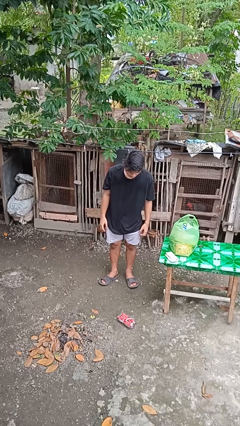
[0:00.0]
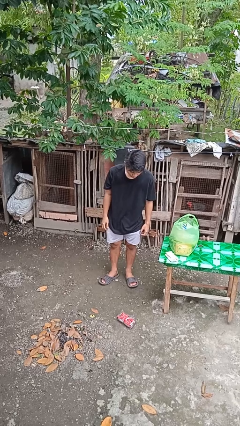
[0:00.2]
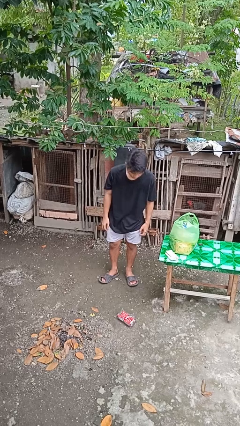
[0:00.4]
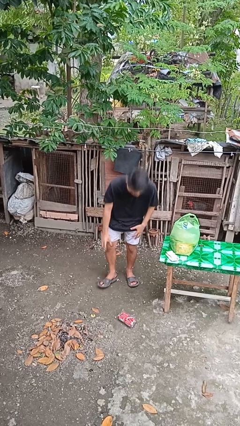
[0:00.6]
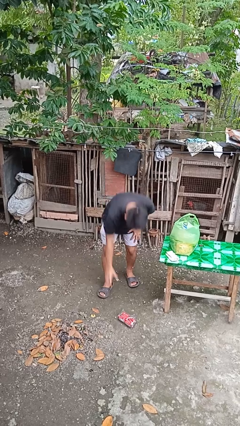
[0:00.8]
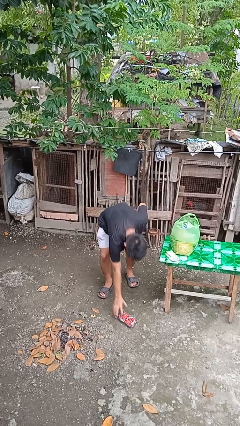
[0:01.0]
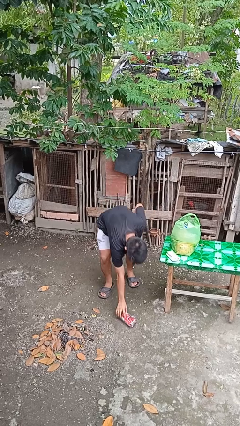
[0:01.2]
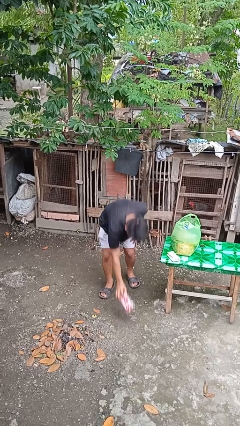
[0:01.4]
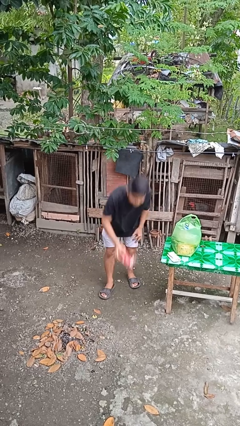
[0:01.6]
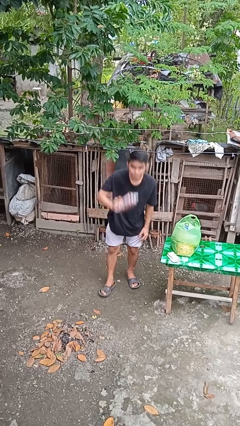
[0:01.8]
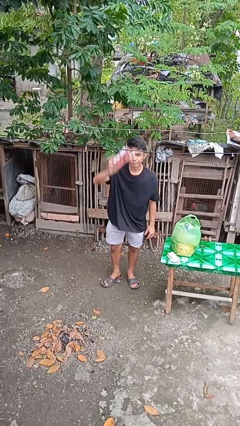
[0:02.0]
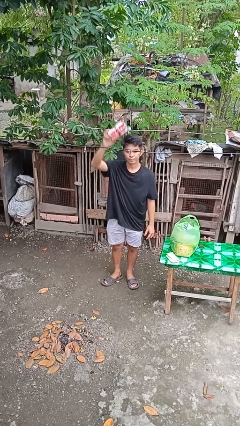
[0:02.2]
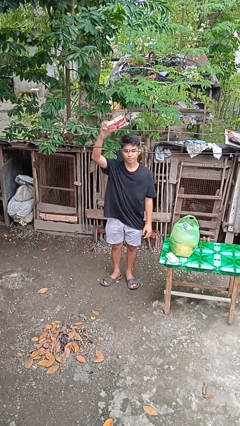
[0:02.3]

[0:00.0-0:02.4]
person picks up object from floor

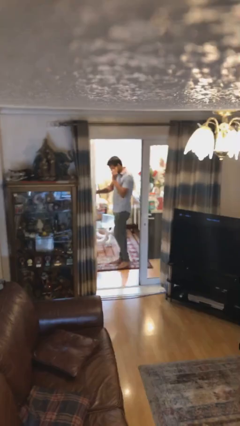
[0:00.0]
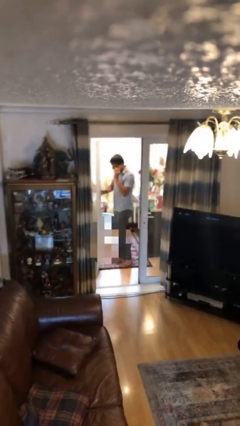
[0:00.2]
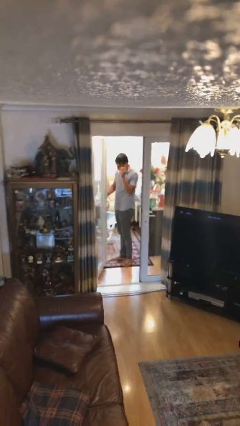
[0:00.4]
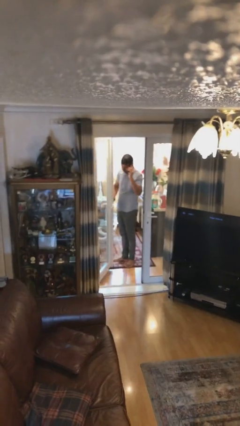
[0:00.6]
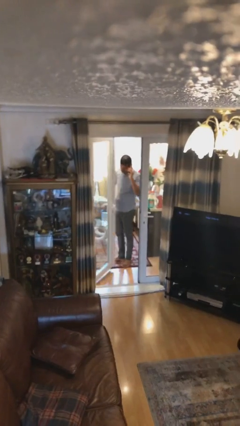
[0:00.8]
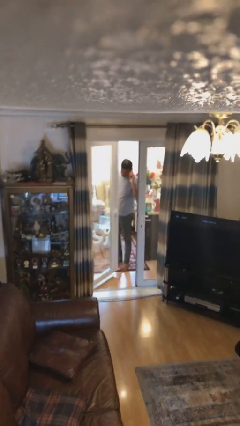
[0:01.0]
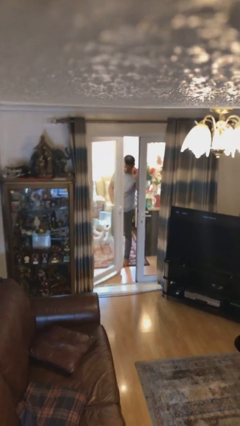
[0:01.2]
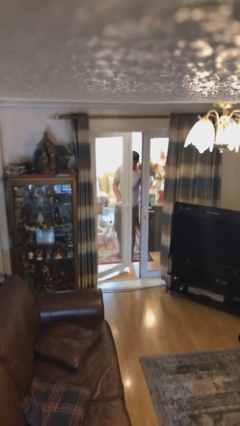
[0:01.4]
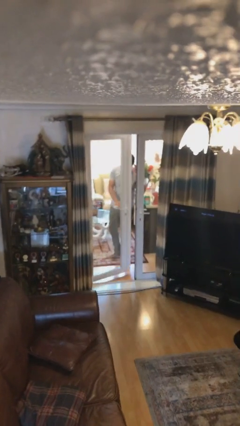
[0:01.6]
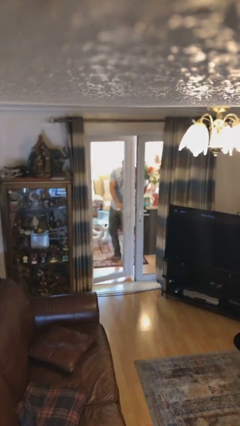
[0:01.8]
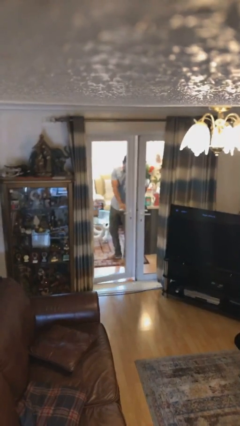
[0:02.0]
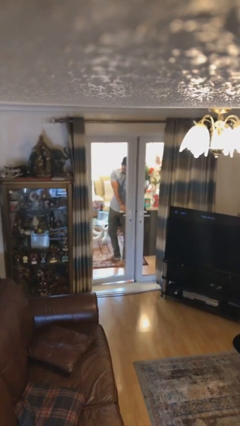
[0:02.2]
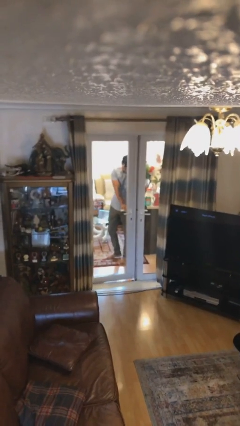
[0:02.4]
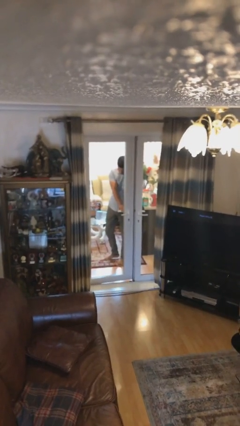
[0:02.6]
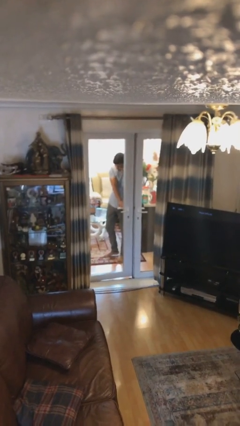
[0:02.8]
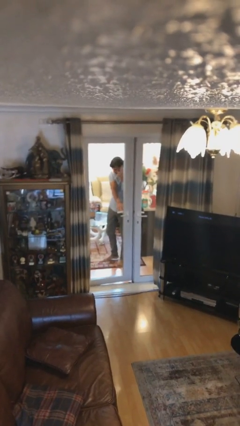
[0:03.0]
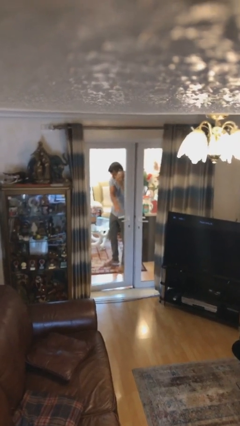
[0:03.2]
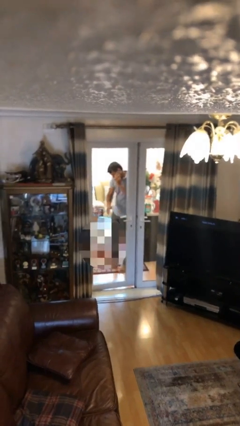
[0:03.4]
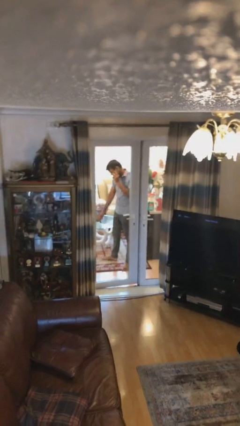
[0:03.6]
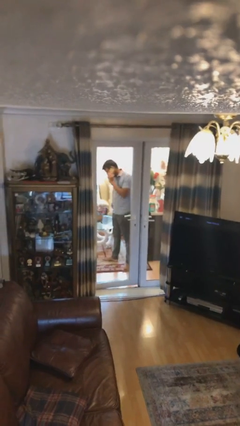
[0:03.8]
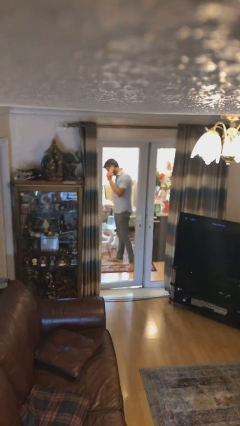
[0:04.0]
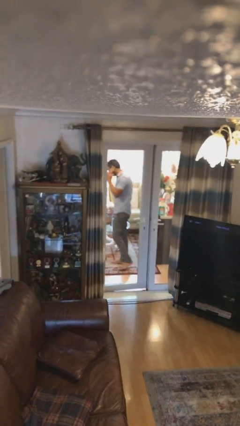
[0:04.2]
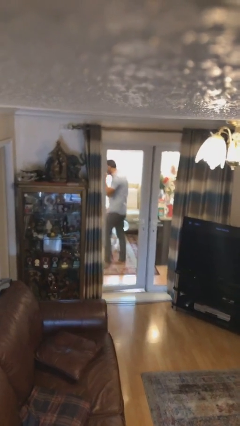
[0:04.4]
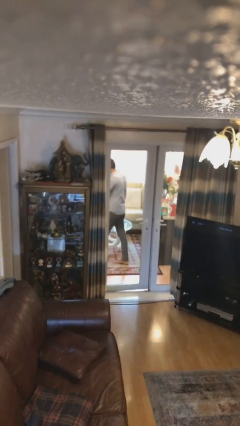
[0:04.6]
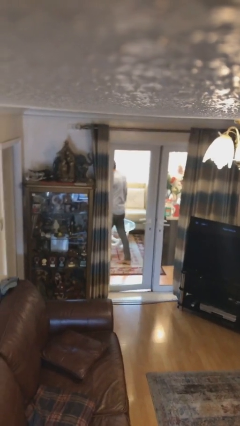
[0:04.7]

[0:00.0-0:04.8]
person closes facility door

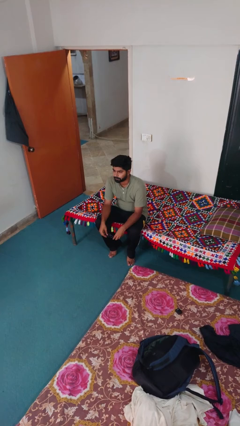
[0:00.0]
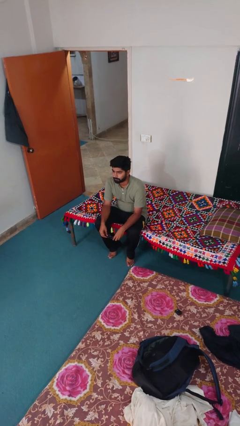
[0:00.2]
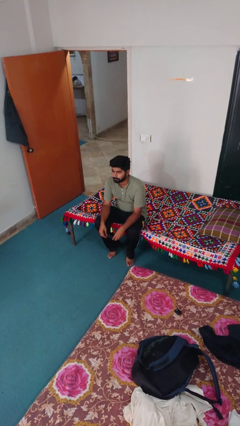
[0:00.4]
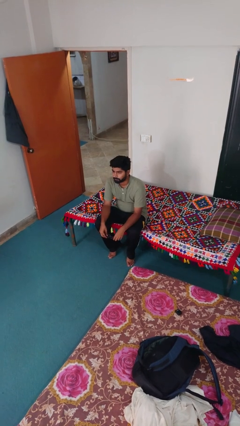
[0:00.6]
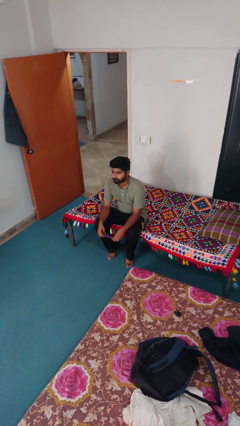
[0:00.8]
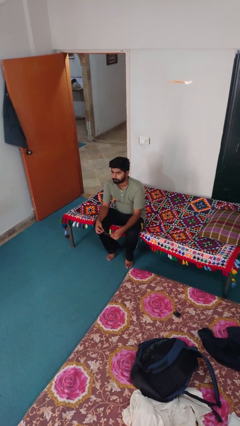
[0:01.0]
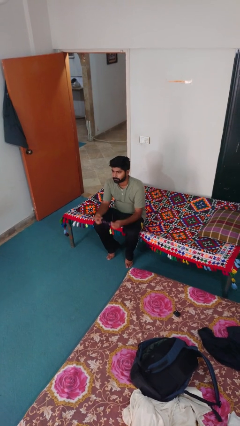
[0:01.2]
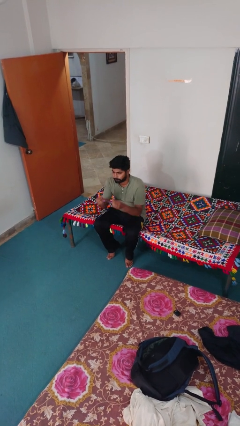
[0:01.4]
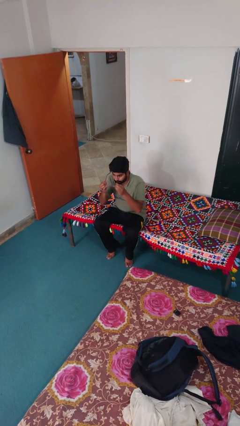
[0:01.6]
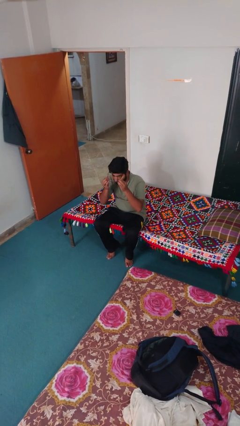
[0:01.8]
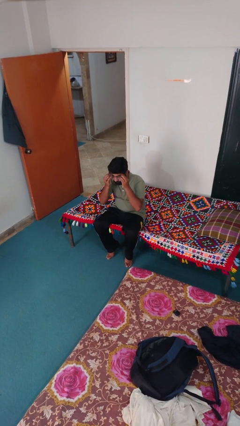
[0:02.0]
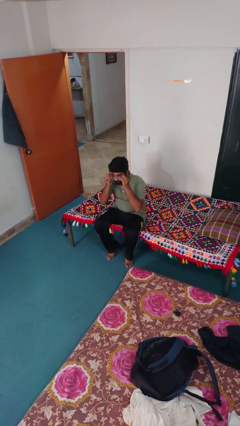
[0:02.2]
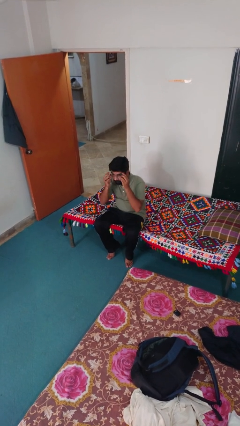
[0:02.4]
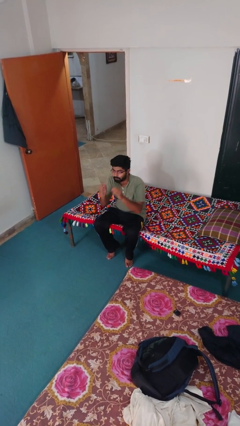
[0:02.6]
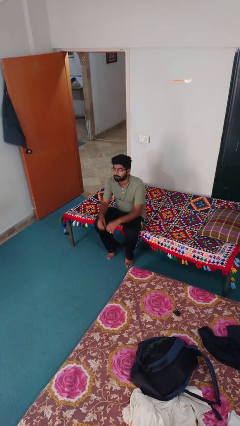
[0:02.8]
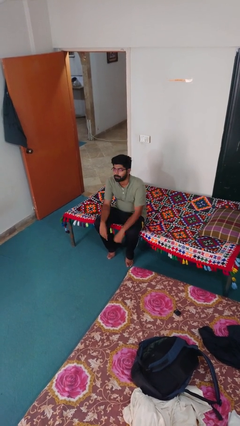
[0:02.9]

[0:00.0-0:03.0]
person puts on glasses

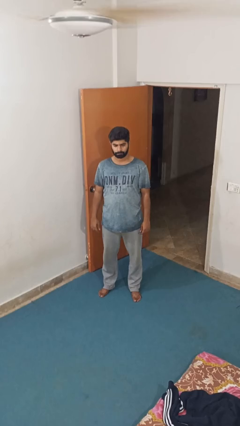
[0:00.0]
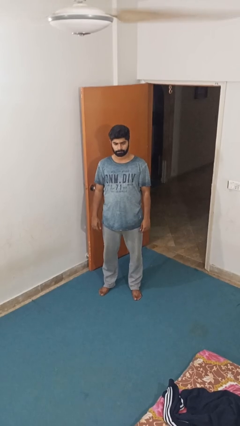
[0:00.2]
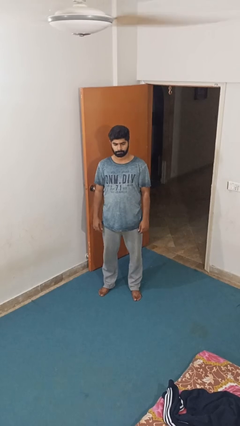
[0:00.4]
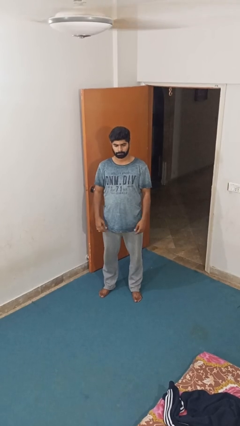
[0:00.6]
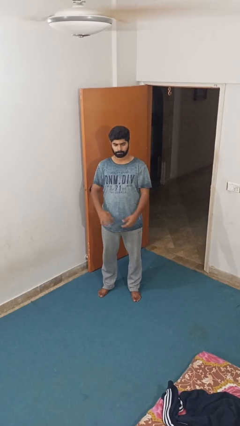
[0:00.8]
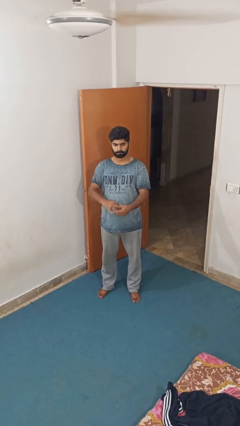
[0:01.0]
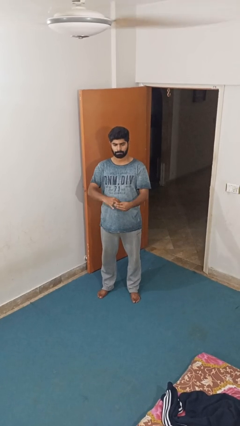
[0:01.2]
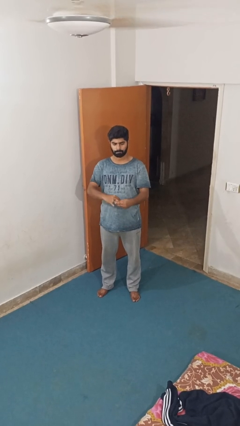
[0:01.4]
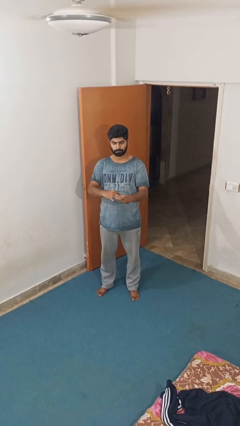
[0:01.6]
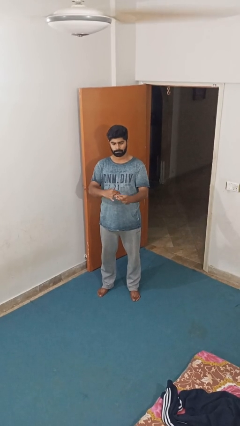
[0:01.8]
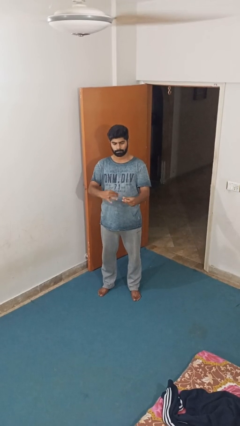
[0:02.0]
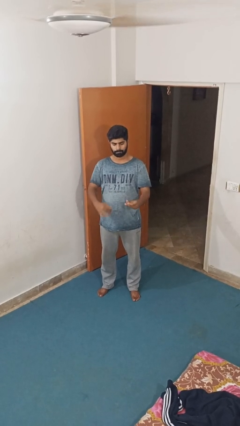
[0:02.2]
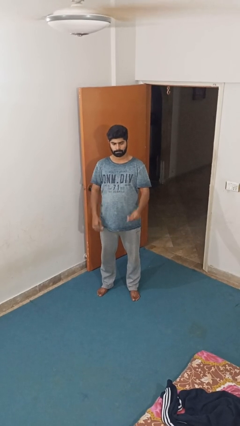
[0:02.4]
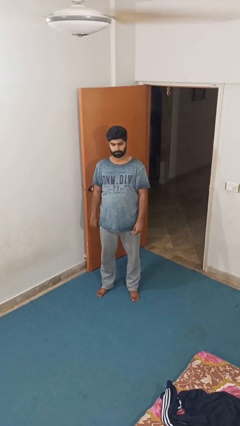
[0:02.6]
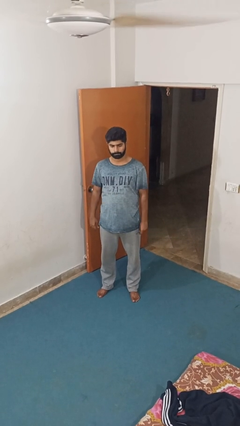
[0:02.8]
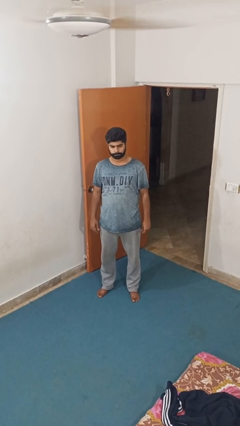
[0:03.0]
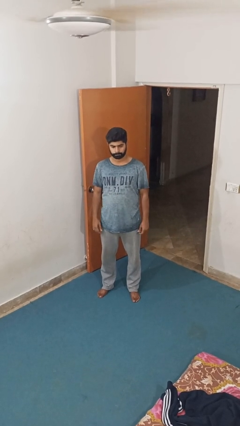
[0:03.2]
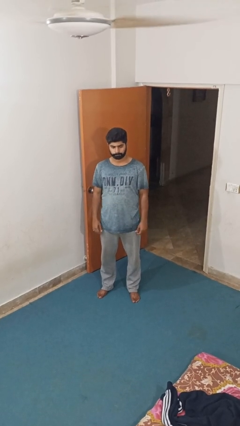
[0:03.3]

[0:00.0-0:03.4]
person takes off ring

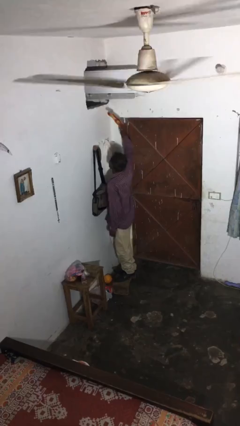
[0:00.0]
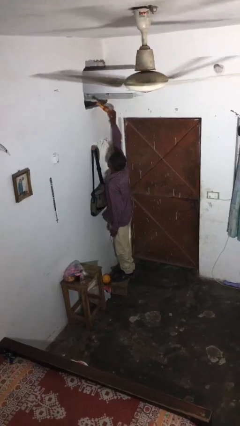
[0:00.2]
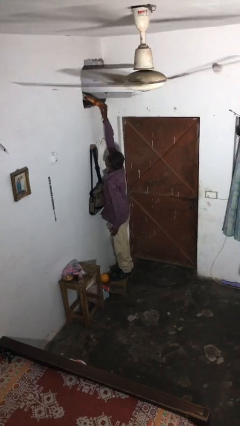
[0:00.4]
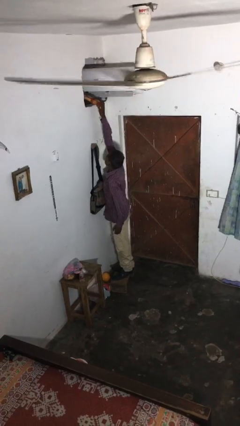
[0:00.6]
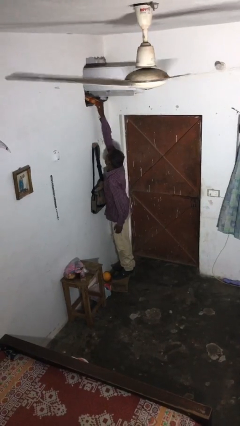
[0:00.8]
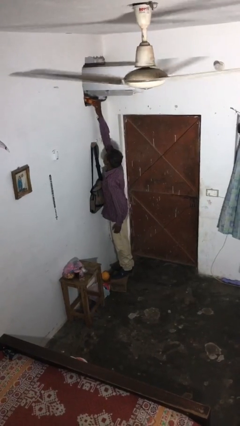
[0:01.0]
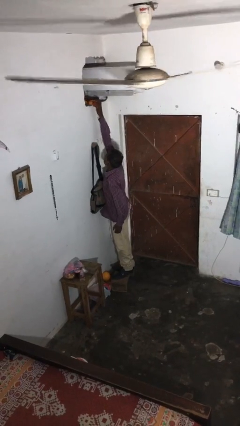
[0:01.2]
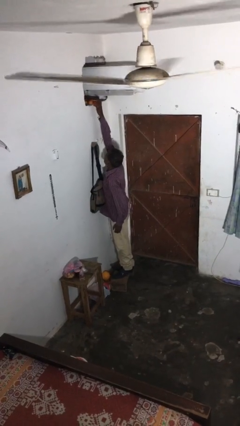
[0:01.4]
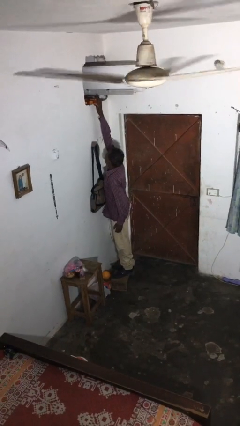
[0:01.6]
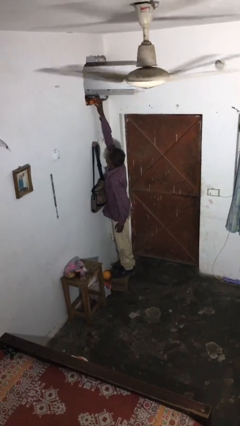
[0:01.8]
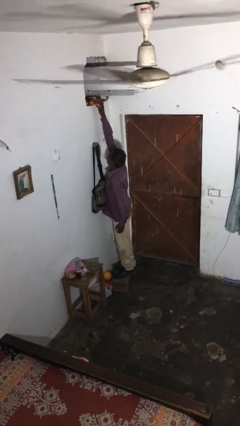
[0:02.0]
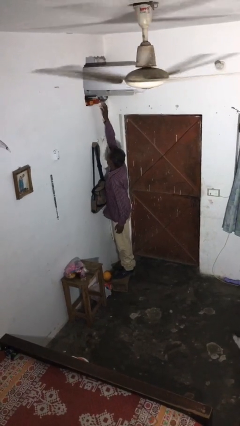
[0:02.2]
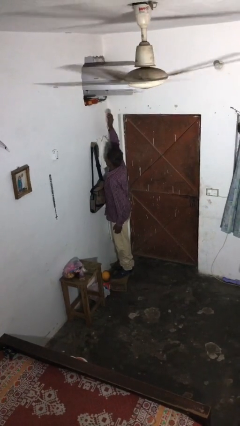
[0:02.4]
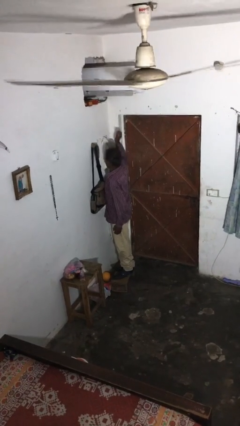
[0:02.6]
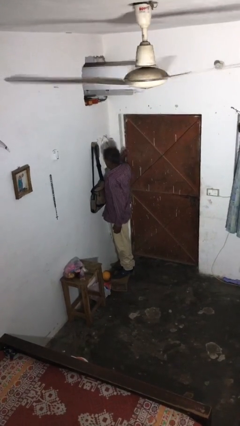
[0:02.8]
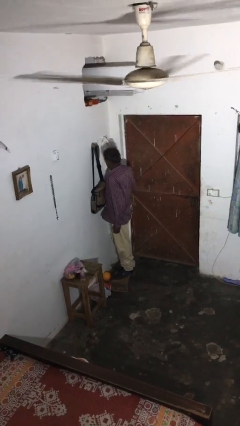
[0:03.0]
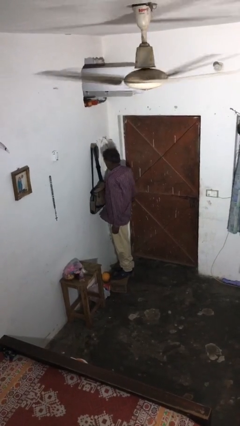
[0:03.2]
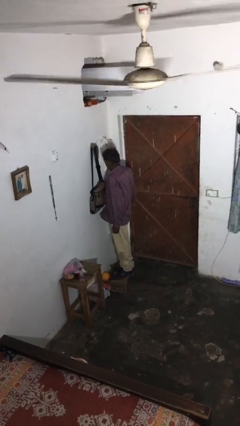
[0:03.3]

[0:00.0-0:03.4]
person puts down object on shelf

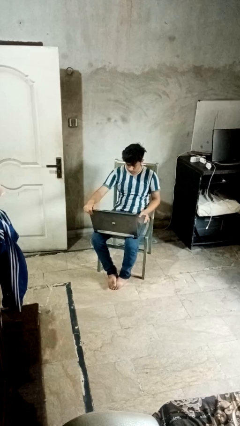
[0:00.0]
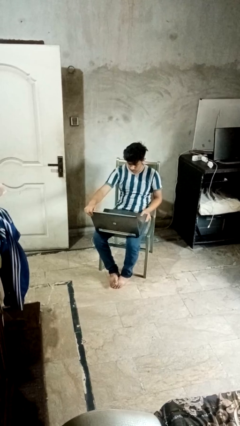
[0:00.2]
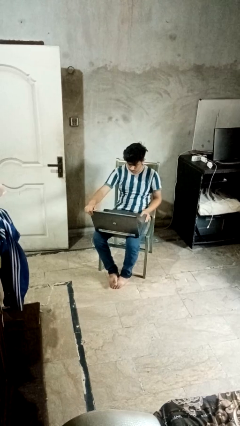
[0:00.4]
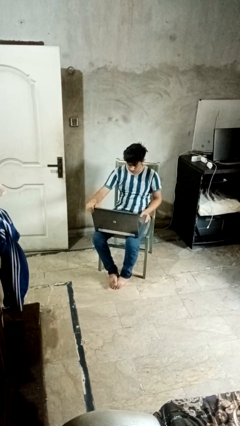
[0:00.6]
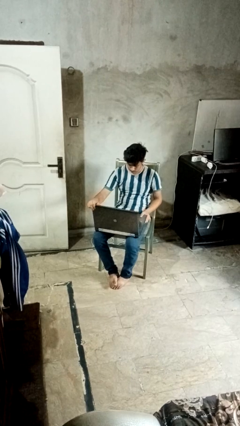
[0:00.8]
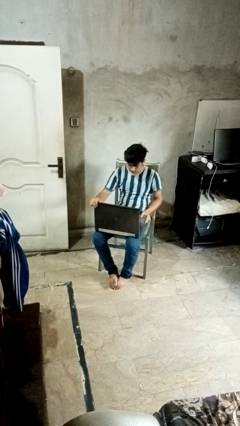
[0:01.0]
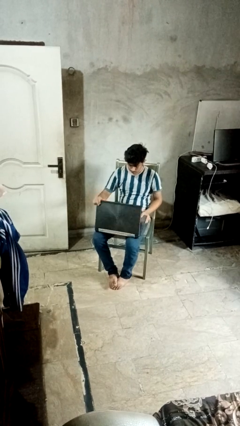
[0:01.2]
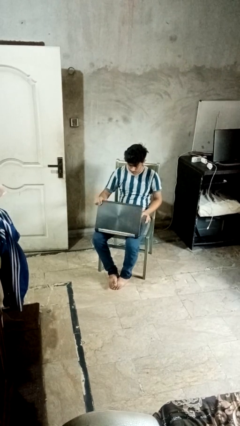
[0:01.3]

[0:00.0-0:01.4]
person closes laptop
